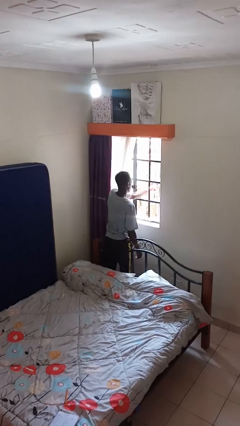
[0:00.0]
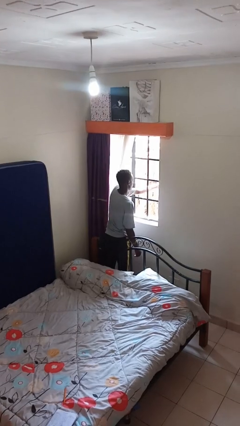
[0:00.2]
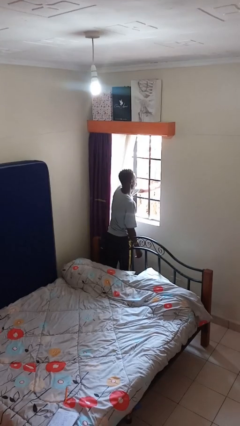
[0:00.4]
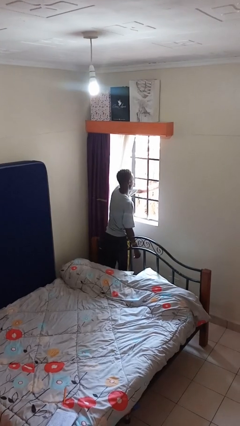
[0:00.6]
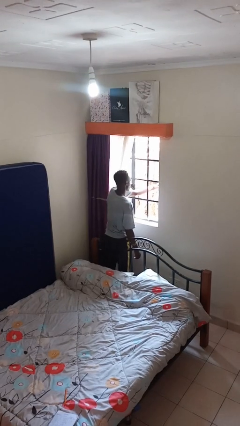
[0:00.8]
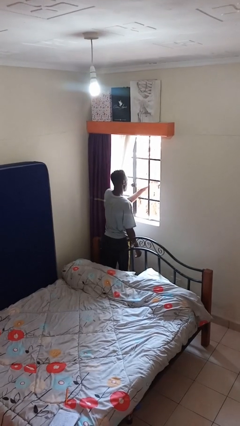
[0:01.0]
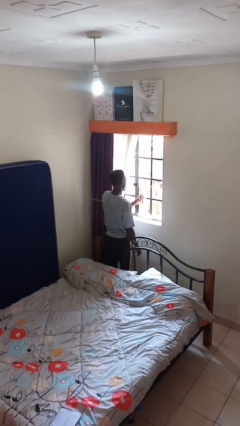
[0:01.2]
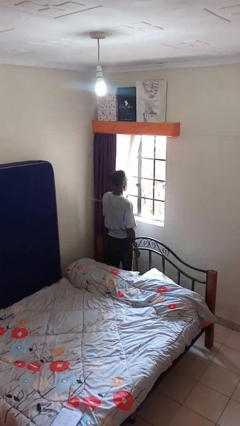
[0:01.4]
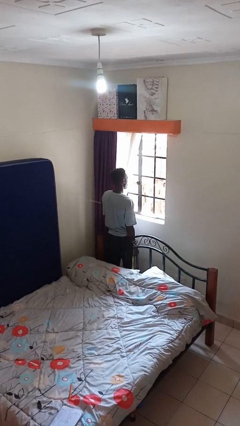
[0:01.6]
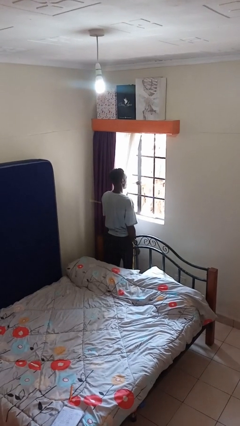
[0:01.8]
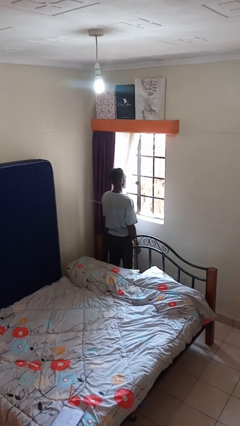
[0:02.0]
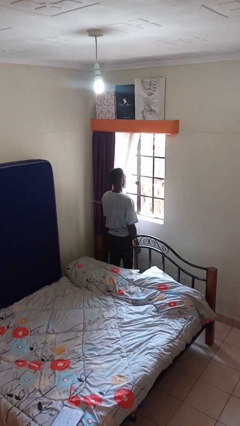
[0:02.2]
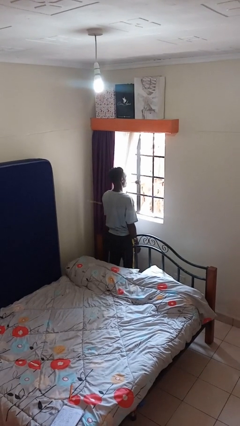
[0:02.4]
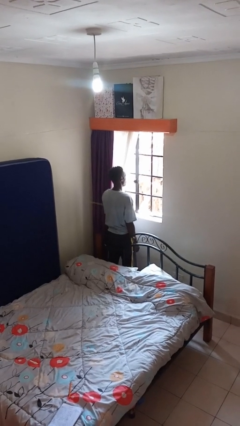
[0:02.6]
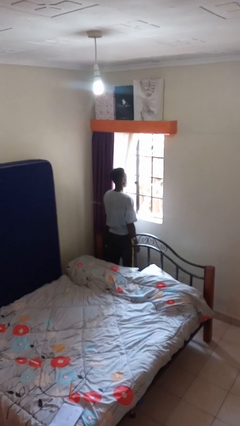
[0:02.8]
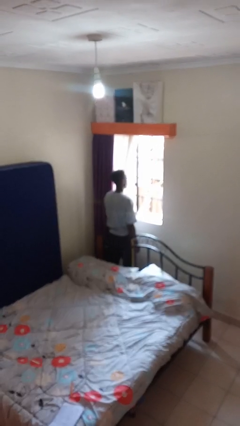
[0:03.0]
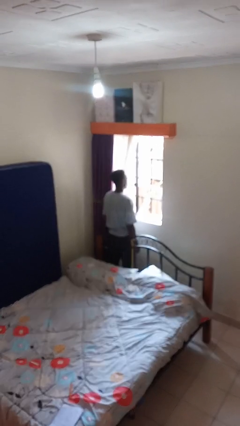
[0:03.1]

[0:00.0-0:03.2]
person opens home window

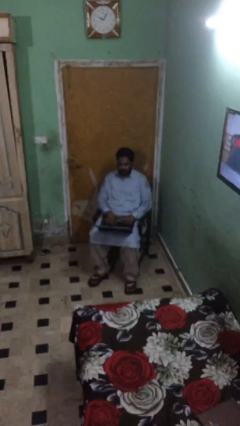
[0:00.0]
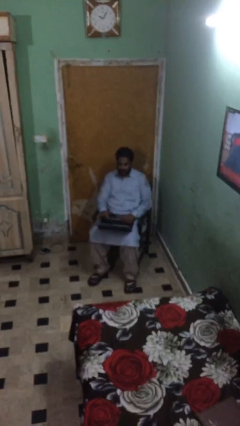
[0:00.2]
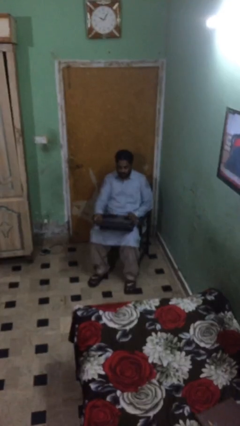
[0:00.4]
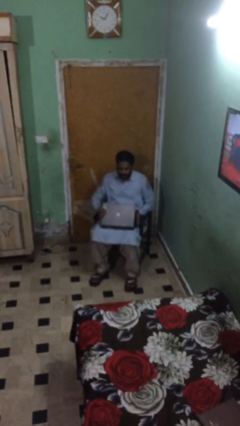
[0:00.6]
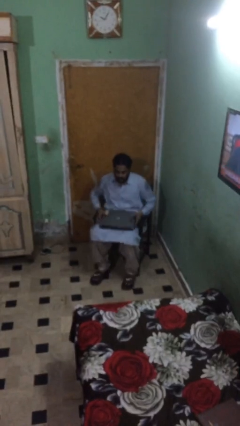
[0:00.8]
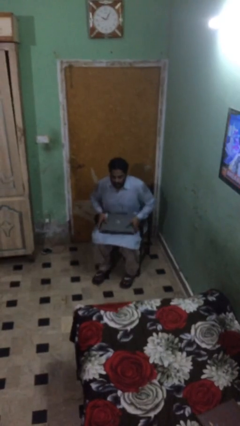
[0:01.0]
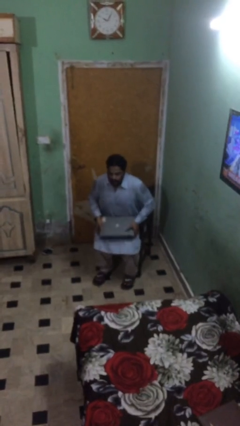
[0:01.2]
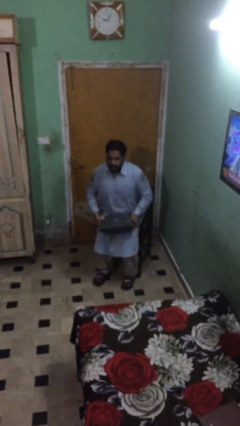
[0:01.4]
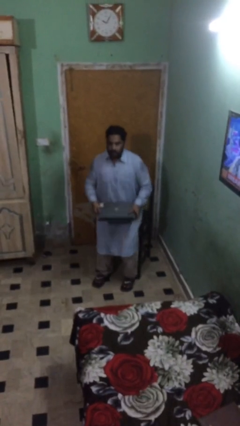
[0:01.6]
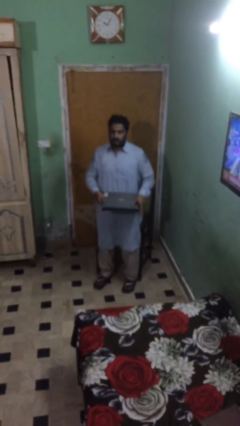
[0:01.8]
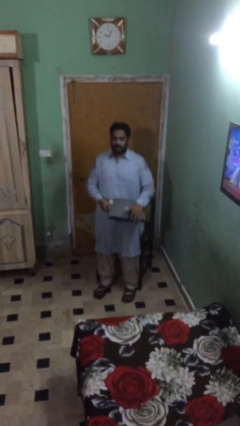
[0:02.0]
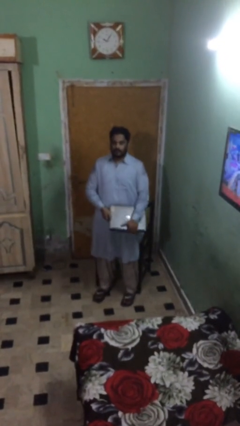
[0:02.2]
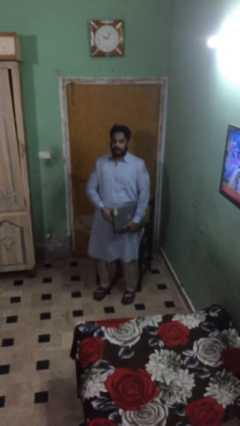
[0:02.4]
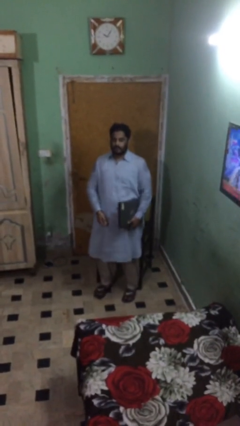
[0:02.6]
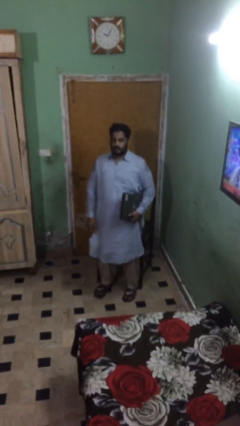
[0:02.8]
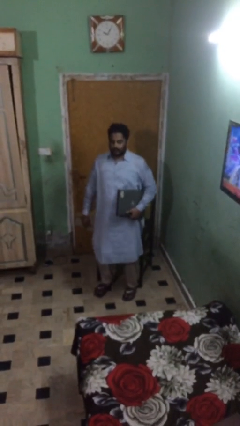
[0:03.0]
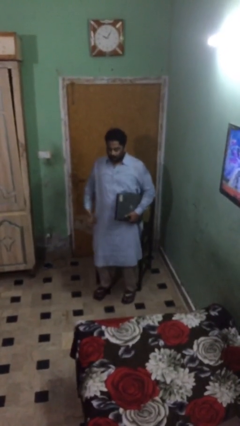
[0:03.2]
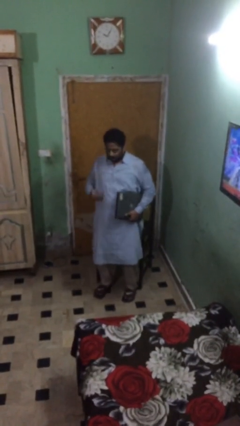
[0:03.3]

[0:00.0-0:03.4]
person stands up

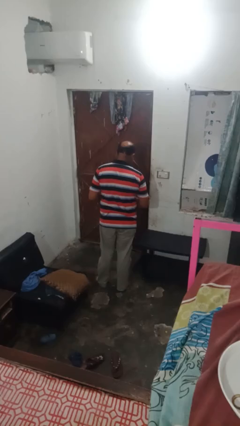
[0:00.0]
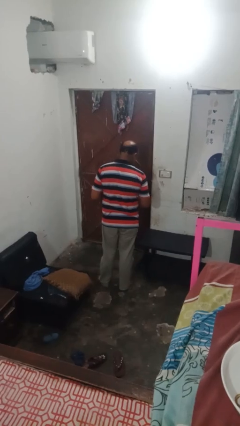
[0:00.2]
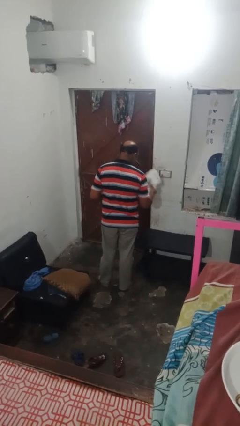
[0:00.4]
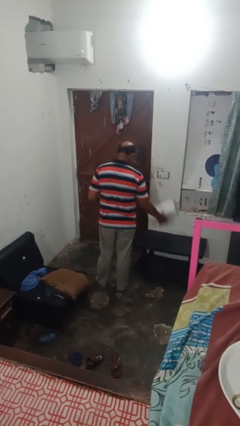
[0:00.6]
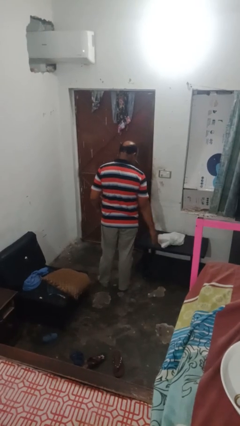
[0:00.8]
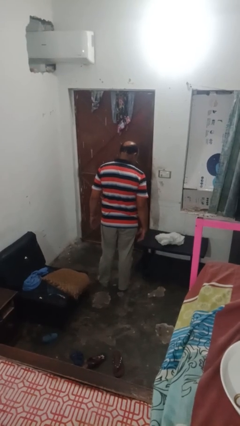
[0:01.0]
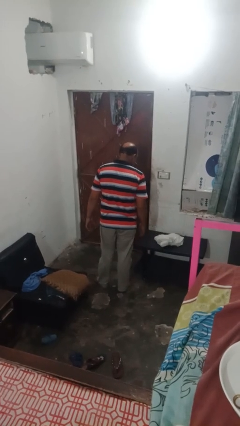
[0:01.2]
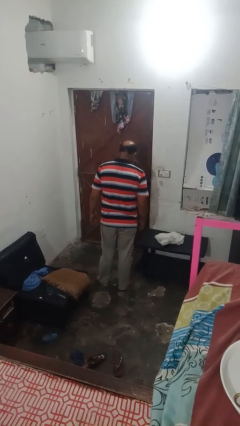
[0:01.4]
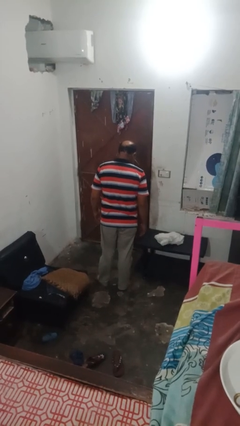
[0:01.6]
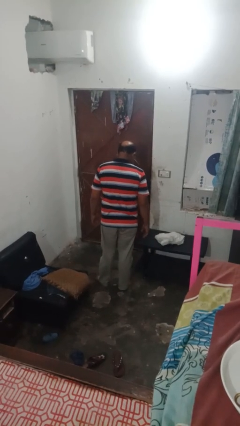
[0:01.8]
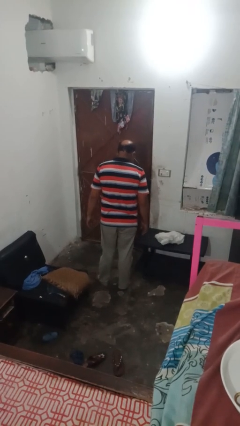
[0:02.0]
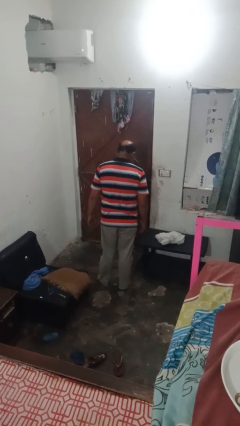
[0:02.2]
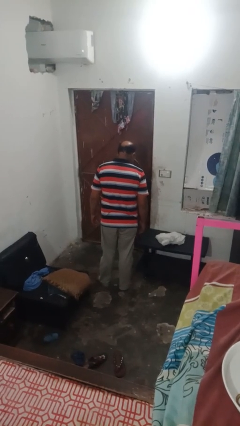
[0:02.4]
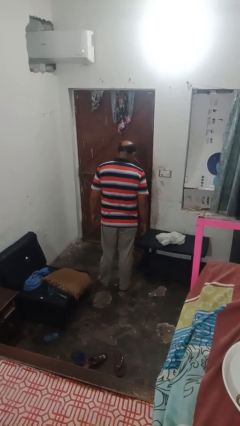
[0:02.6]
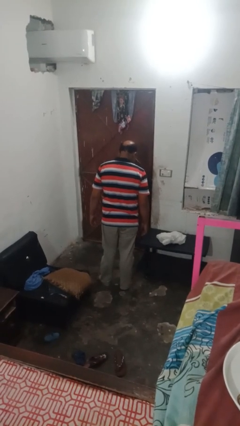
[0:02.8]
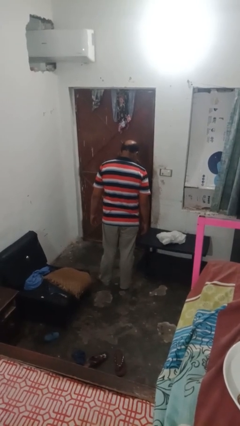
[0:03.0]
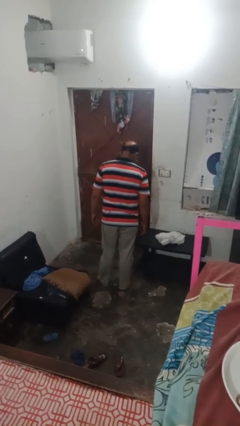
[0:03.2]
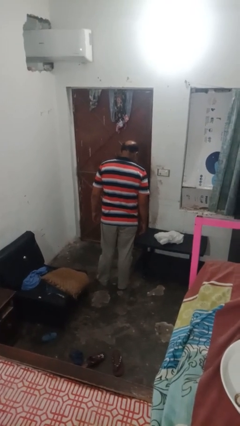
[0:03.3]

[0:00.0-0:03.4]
person throws object on table

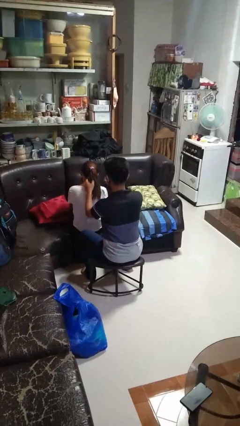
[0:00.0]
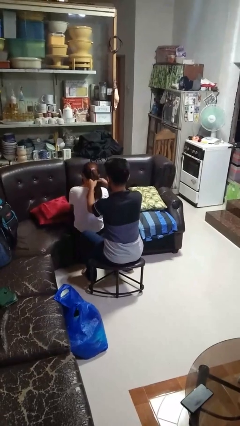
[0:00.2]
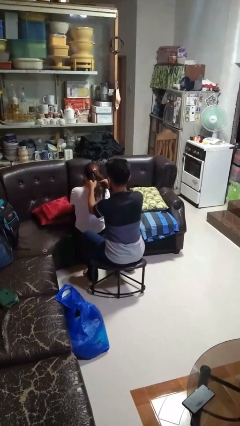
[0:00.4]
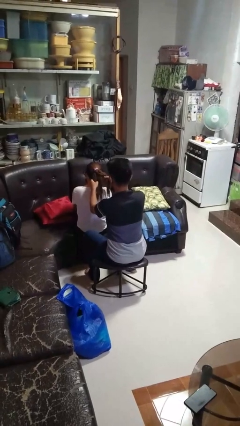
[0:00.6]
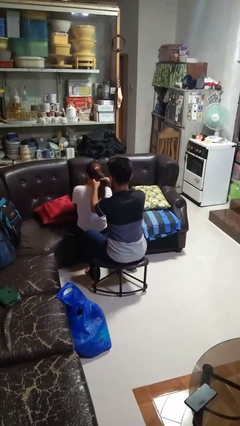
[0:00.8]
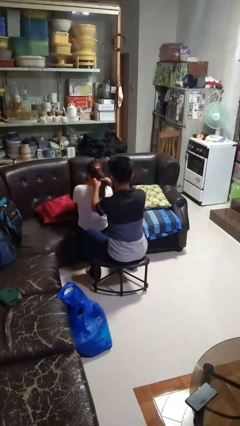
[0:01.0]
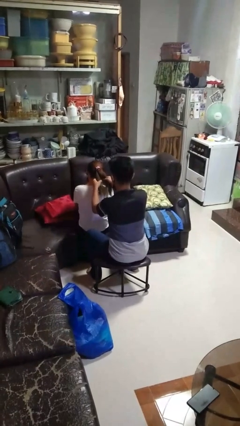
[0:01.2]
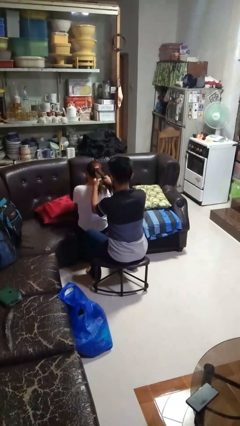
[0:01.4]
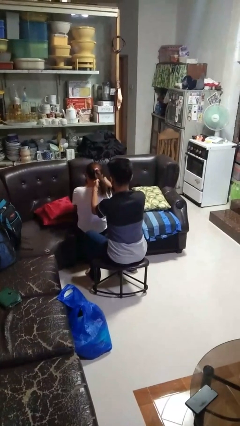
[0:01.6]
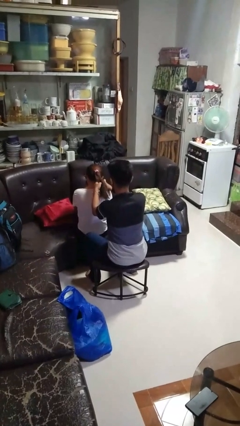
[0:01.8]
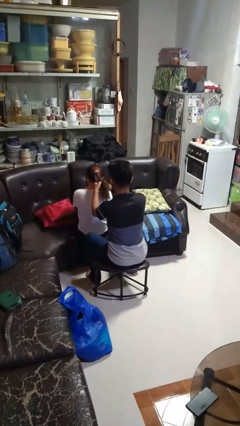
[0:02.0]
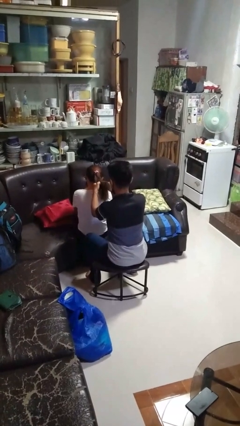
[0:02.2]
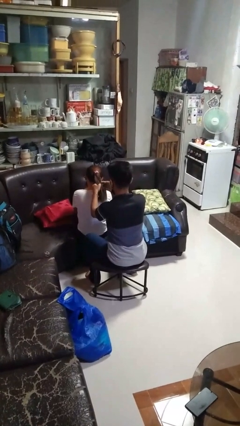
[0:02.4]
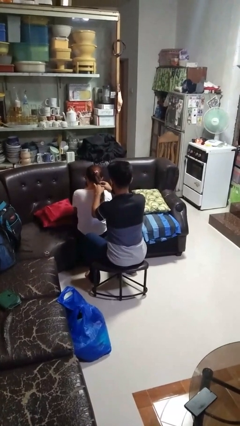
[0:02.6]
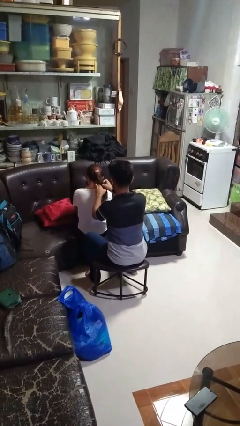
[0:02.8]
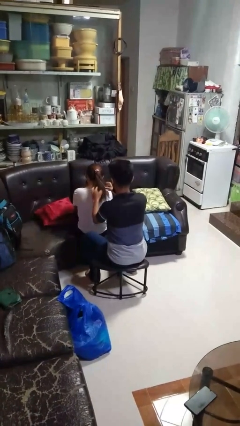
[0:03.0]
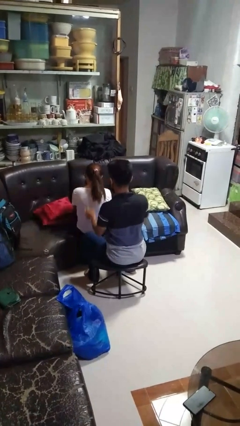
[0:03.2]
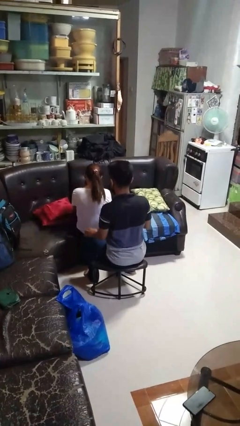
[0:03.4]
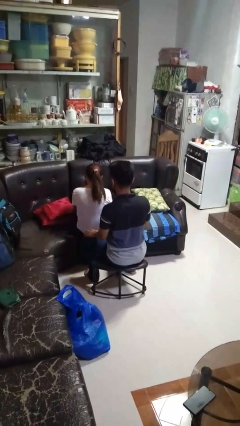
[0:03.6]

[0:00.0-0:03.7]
person braids hair of person

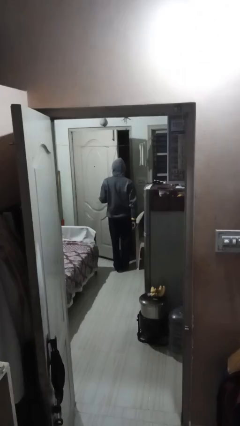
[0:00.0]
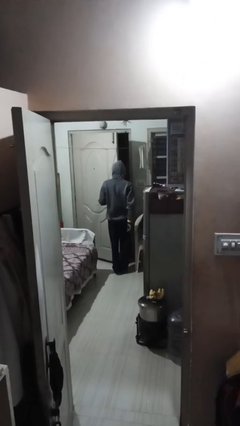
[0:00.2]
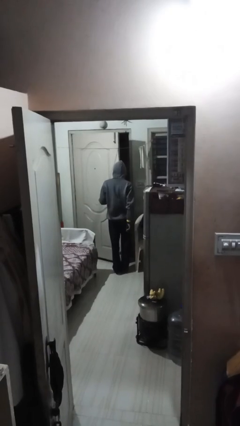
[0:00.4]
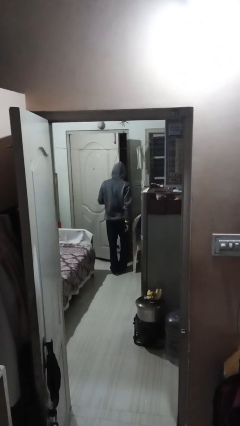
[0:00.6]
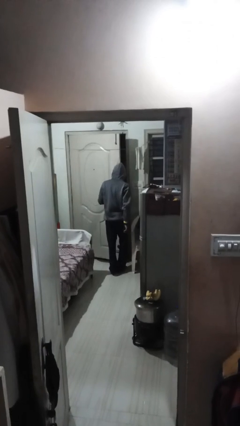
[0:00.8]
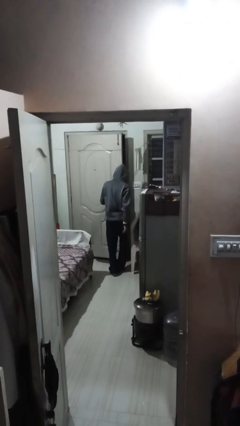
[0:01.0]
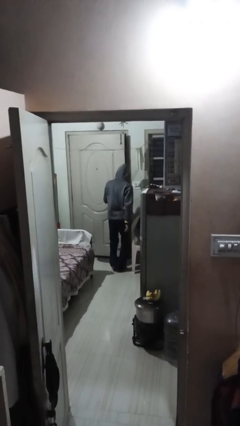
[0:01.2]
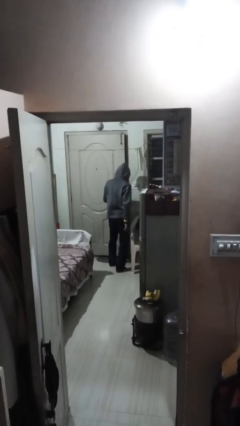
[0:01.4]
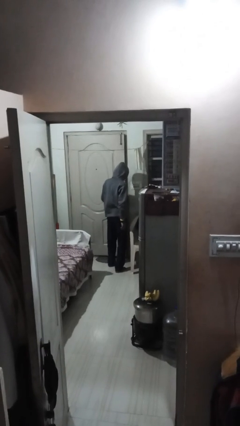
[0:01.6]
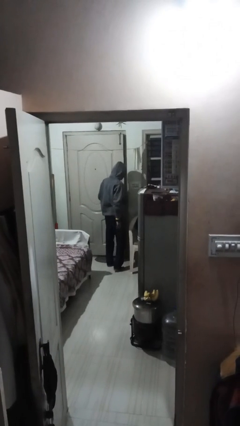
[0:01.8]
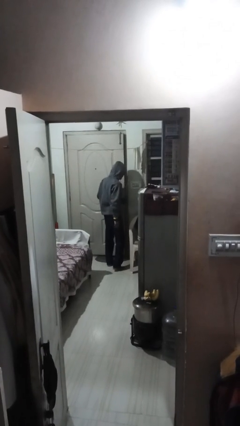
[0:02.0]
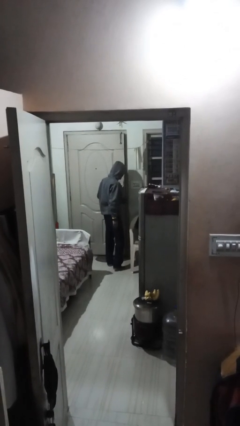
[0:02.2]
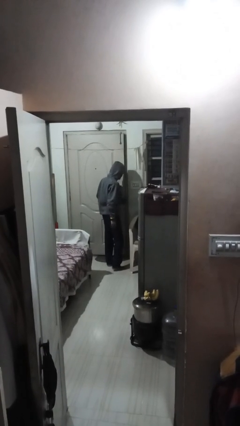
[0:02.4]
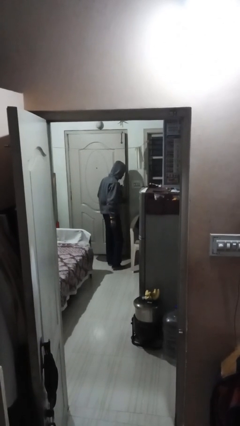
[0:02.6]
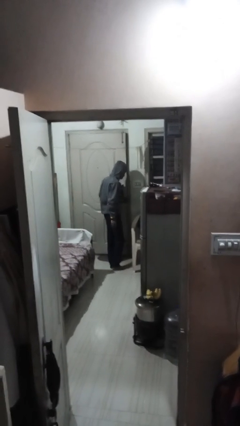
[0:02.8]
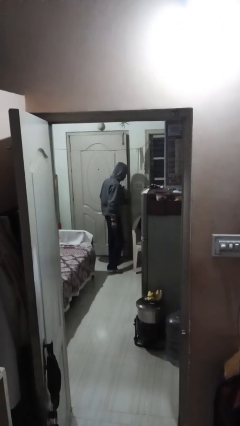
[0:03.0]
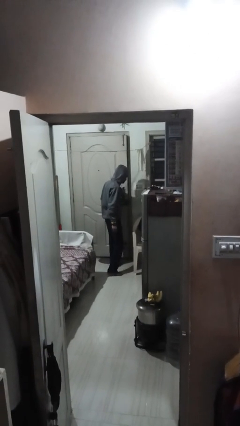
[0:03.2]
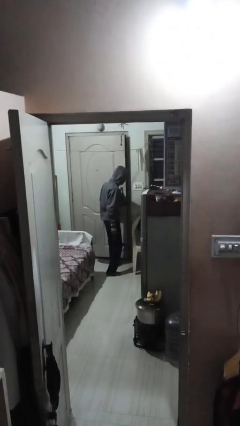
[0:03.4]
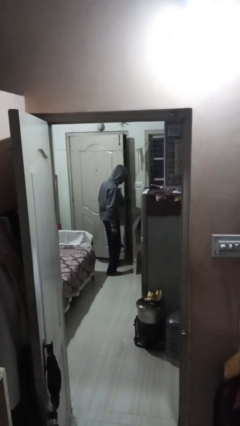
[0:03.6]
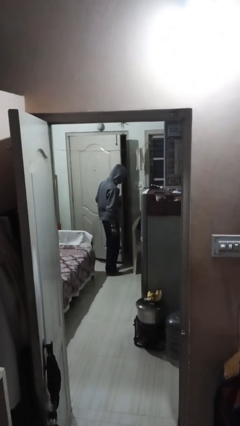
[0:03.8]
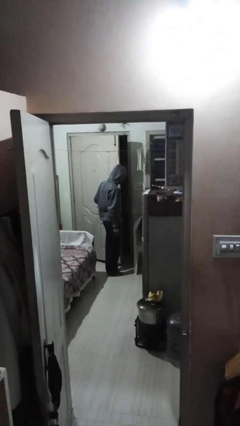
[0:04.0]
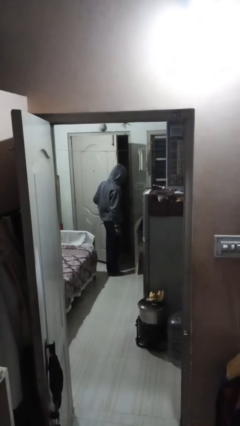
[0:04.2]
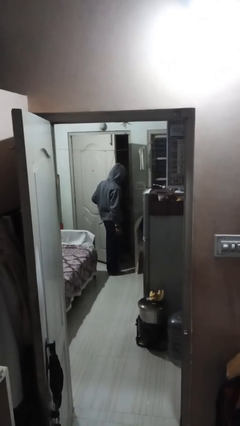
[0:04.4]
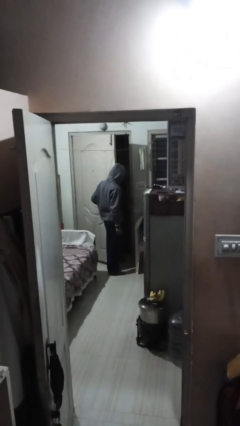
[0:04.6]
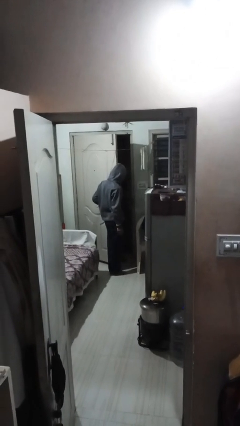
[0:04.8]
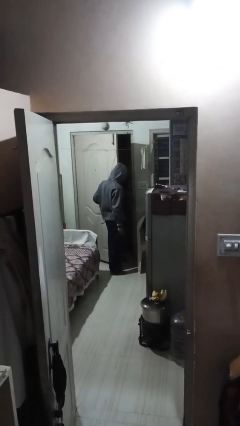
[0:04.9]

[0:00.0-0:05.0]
person closes facility door
